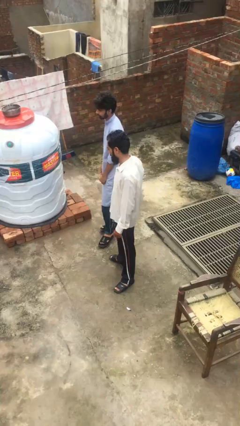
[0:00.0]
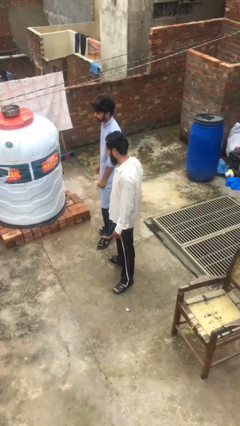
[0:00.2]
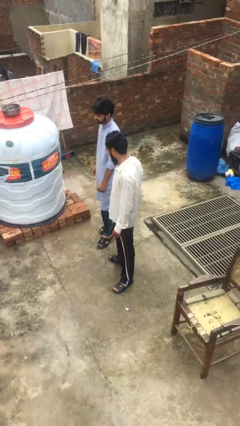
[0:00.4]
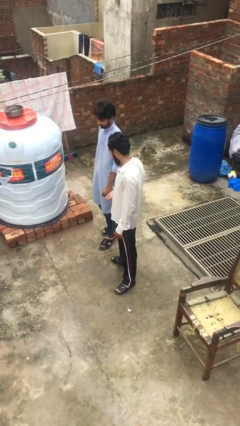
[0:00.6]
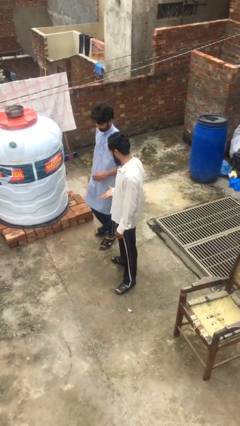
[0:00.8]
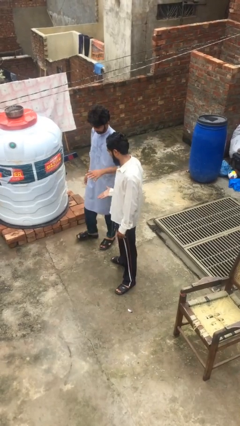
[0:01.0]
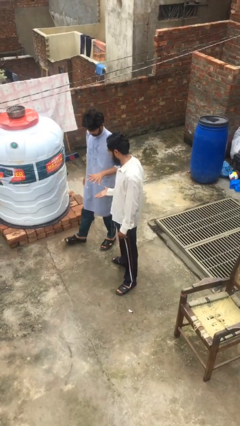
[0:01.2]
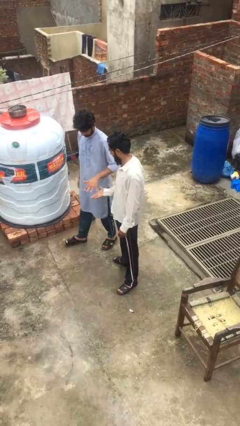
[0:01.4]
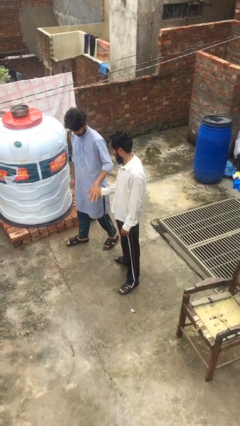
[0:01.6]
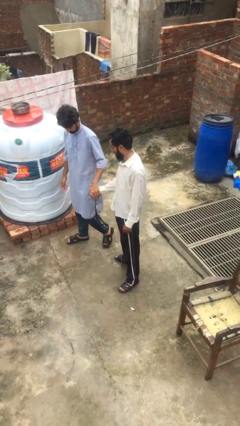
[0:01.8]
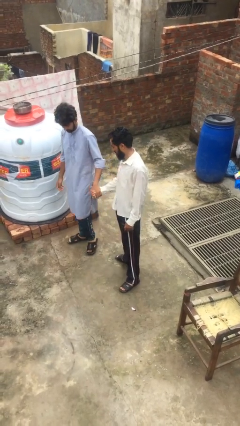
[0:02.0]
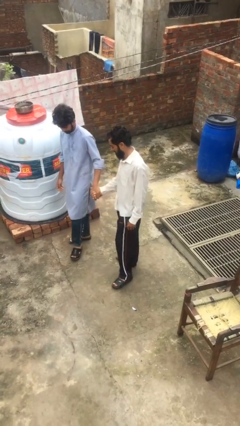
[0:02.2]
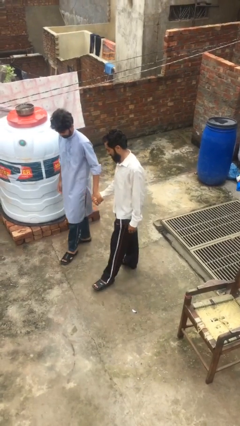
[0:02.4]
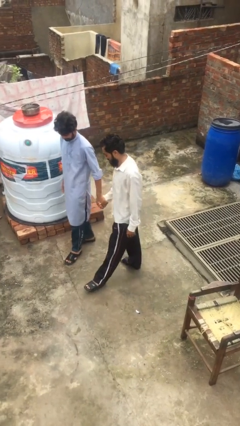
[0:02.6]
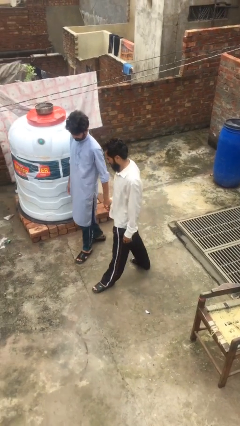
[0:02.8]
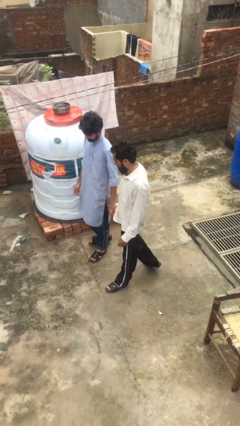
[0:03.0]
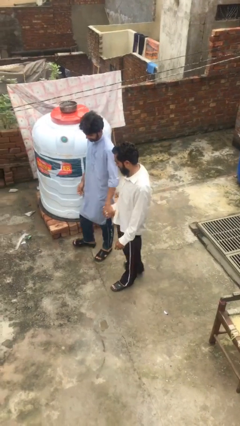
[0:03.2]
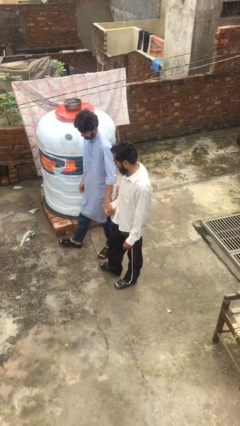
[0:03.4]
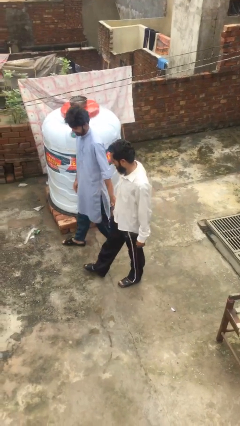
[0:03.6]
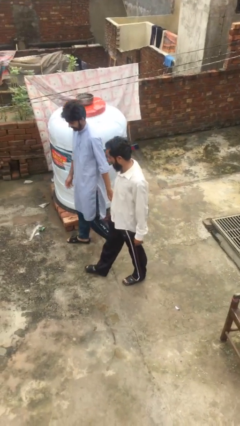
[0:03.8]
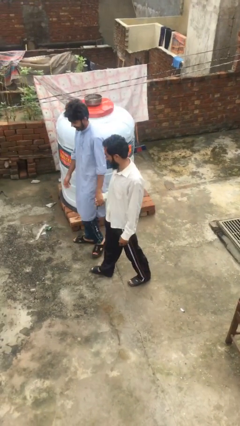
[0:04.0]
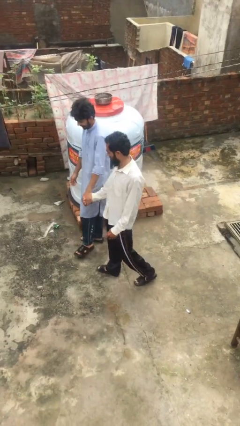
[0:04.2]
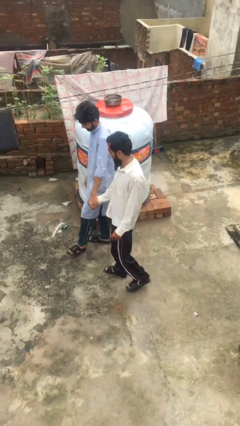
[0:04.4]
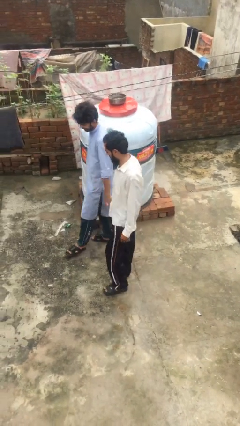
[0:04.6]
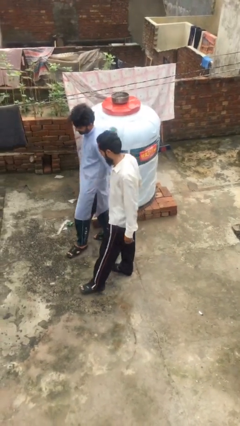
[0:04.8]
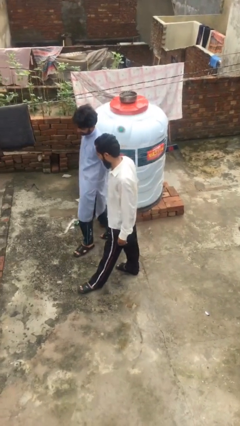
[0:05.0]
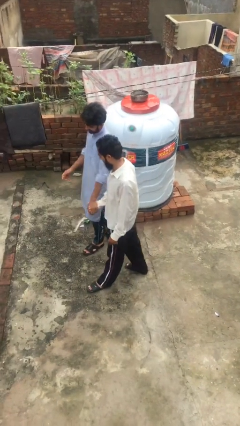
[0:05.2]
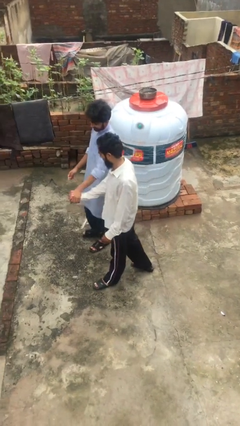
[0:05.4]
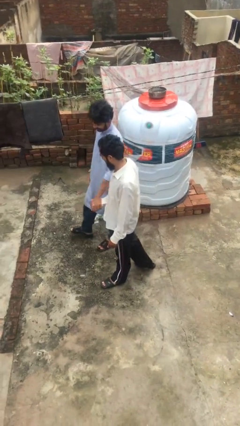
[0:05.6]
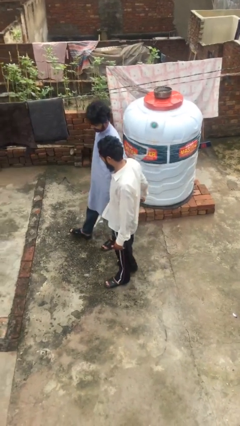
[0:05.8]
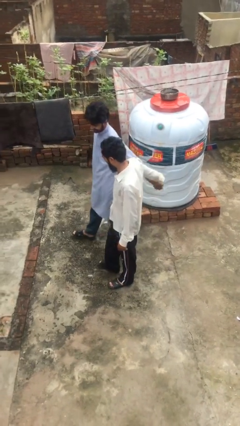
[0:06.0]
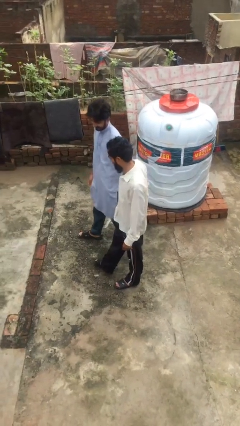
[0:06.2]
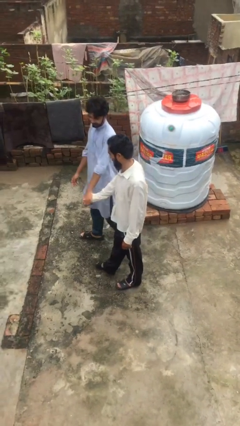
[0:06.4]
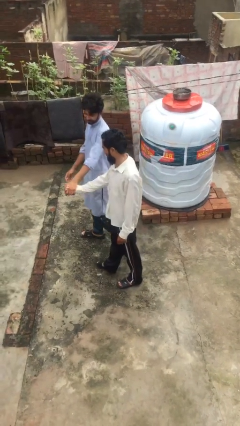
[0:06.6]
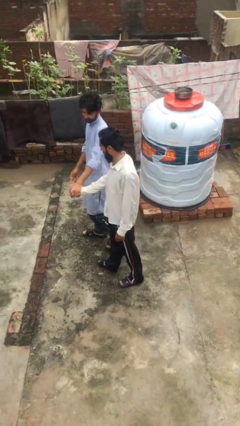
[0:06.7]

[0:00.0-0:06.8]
person holds hand

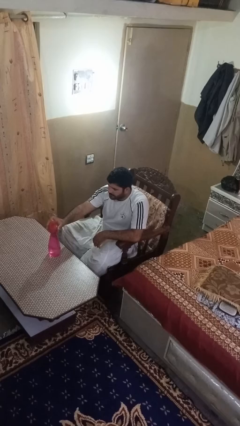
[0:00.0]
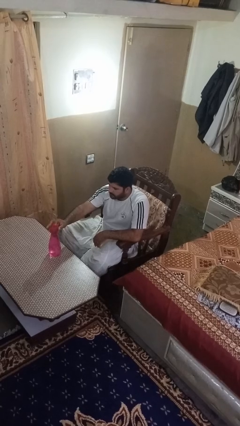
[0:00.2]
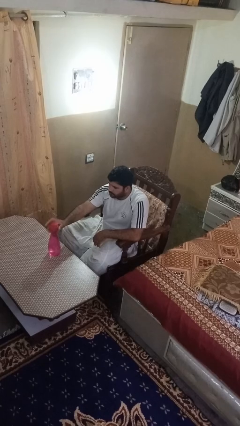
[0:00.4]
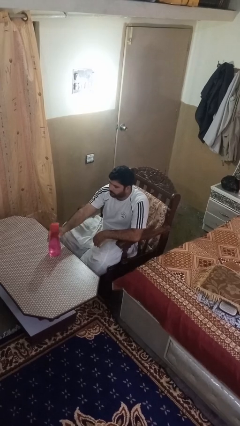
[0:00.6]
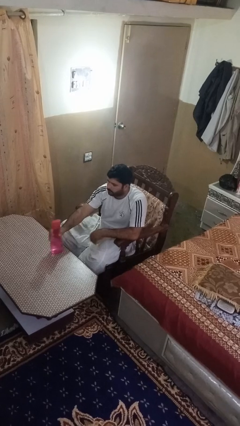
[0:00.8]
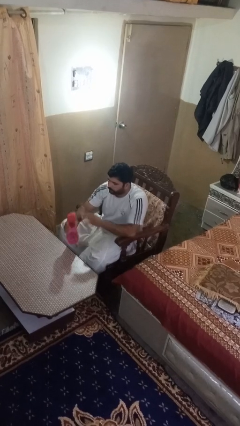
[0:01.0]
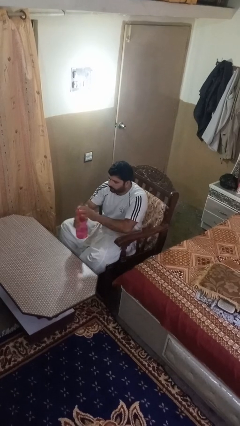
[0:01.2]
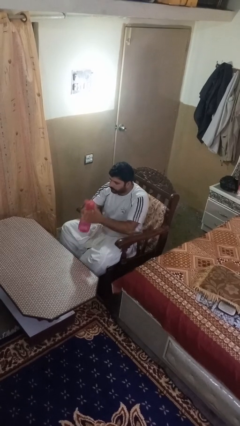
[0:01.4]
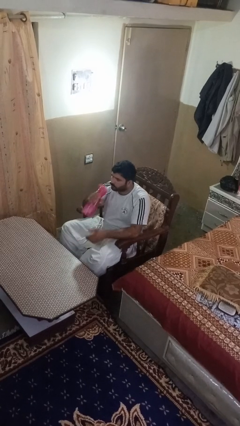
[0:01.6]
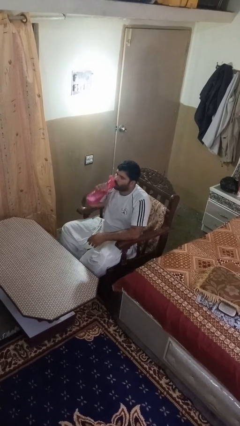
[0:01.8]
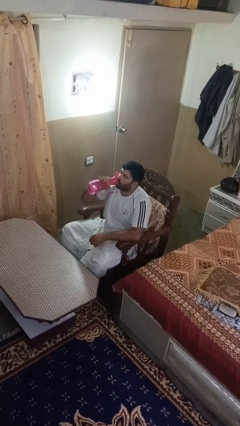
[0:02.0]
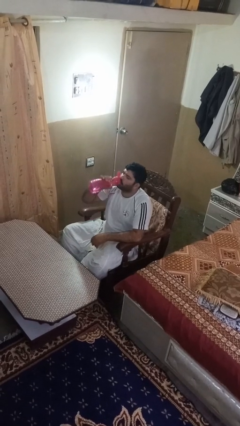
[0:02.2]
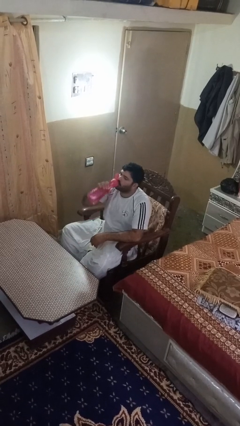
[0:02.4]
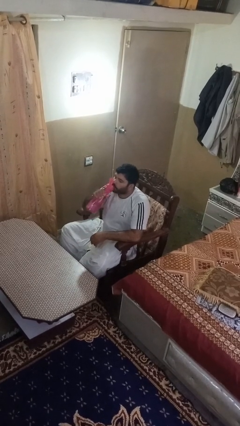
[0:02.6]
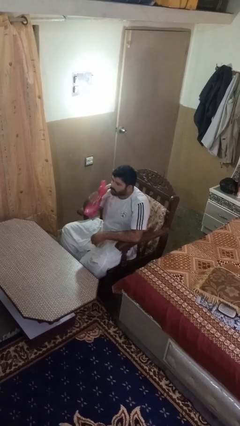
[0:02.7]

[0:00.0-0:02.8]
person drinks from bottle

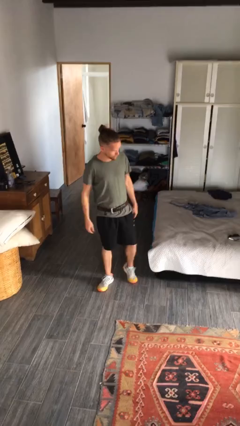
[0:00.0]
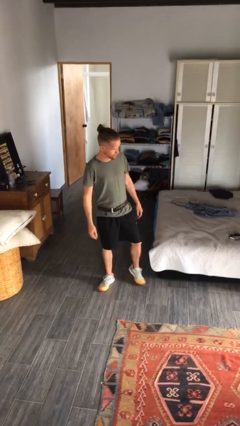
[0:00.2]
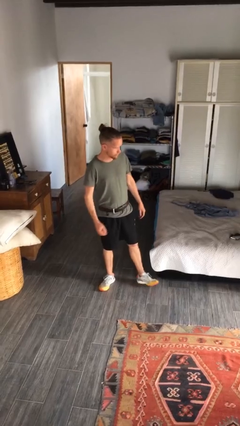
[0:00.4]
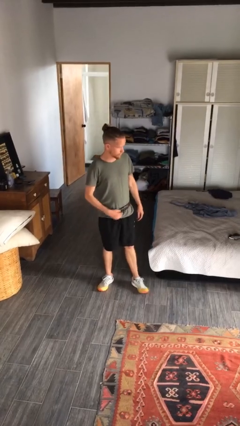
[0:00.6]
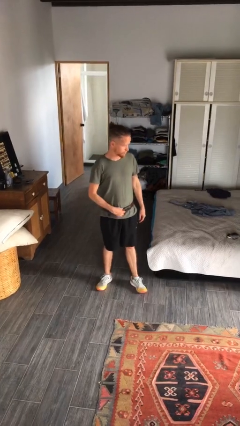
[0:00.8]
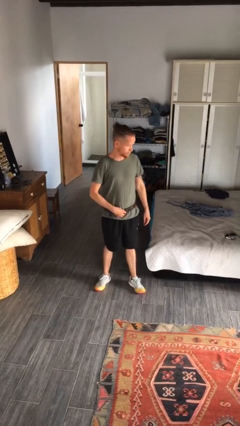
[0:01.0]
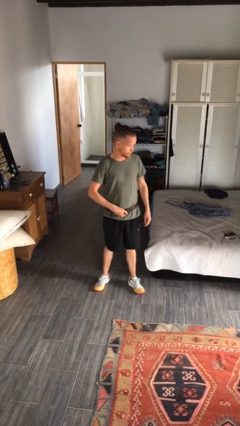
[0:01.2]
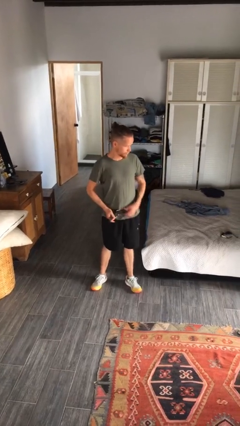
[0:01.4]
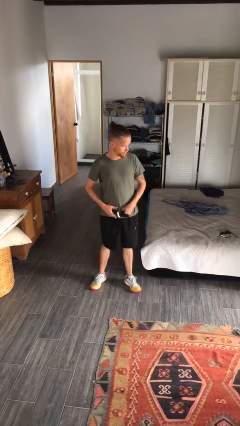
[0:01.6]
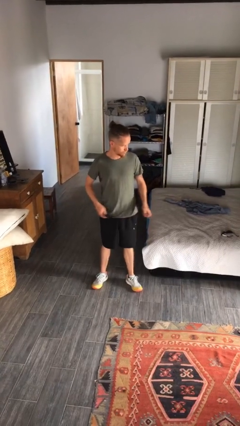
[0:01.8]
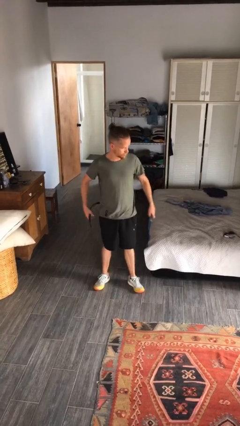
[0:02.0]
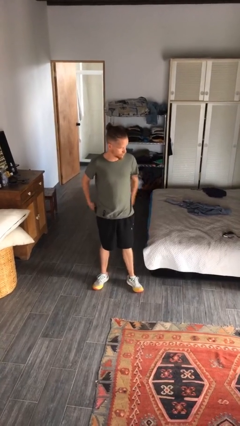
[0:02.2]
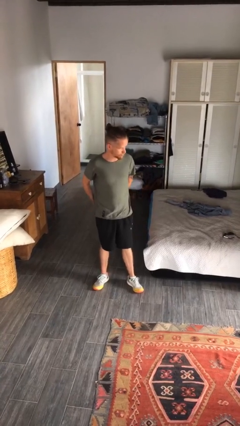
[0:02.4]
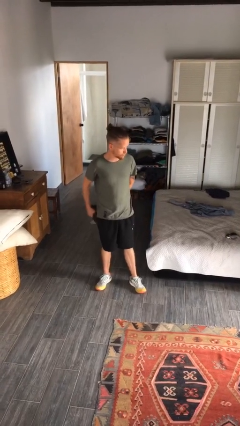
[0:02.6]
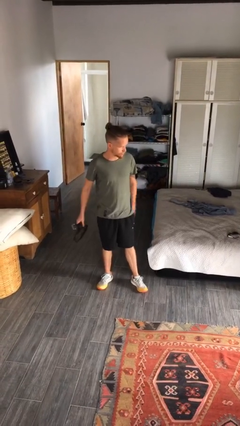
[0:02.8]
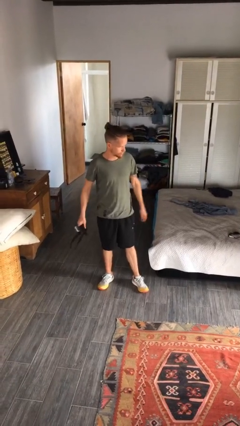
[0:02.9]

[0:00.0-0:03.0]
person takes off belt

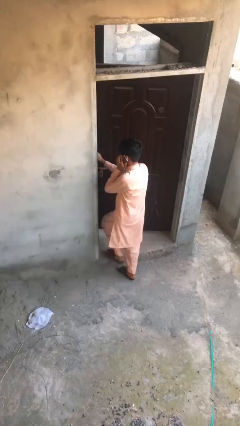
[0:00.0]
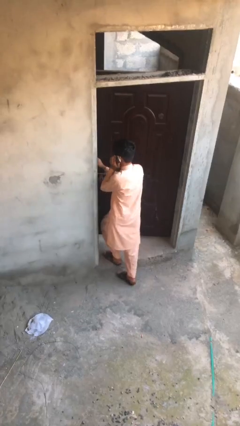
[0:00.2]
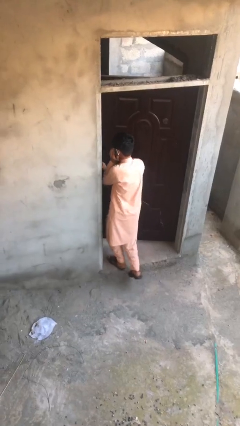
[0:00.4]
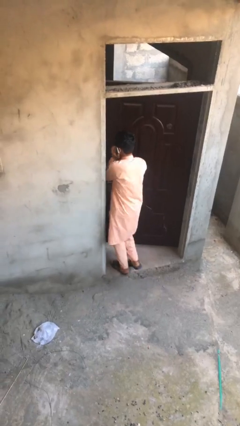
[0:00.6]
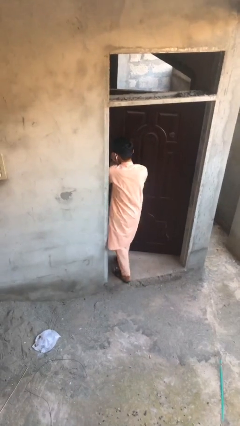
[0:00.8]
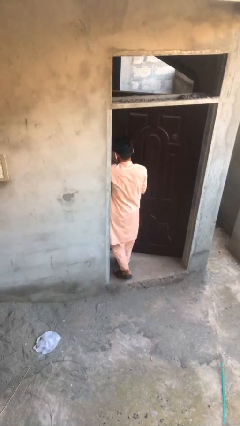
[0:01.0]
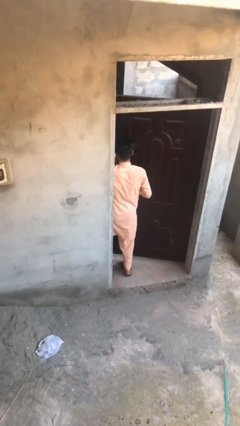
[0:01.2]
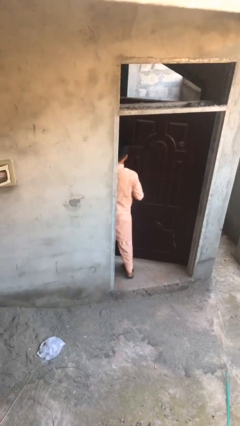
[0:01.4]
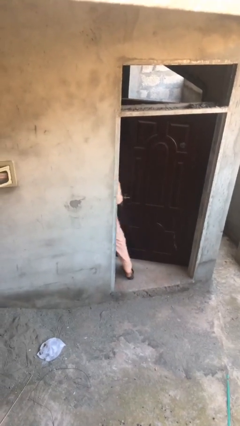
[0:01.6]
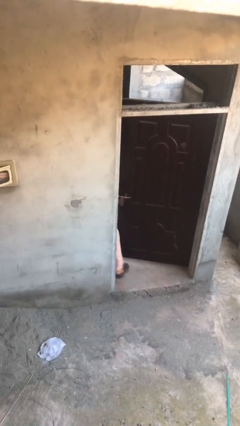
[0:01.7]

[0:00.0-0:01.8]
person exits scene through structure

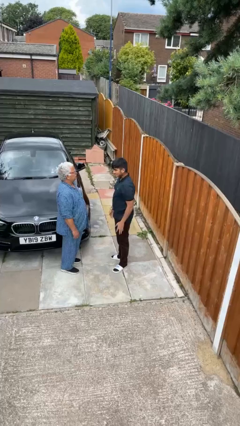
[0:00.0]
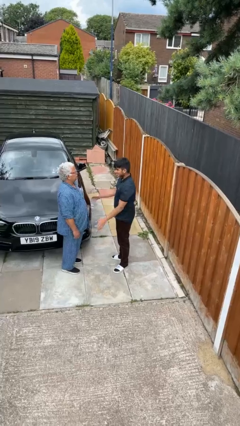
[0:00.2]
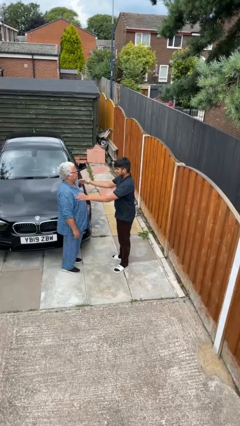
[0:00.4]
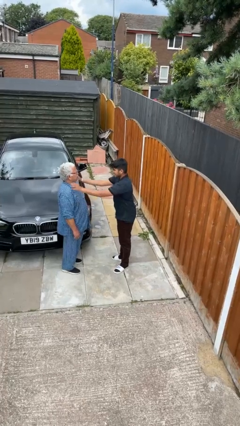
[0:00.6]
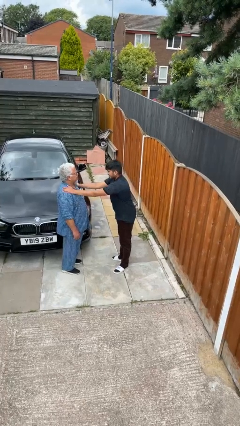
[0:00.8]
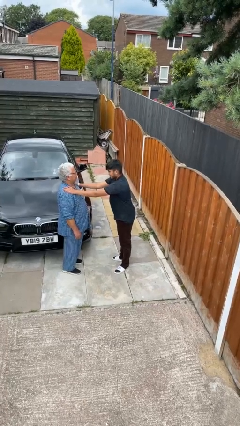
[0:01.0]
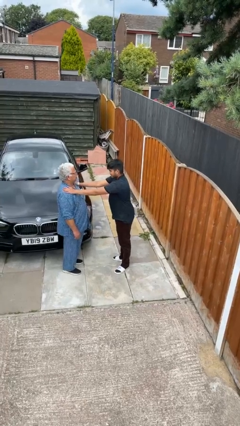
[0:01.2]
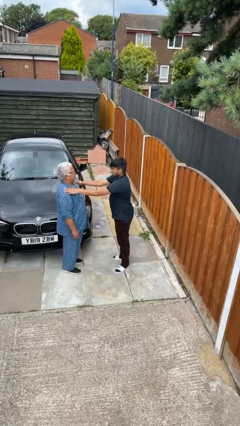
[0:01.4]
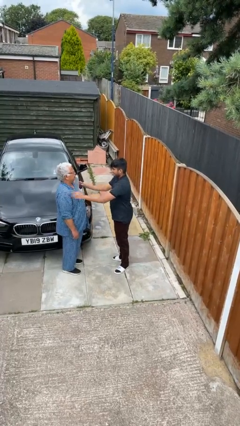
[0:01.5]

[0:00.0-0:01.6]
person pounds shoulders of person

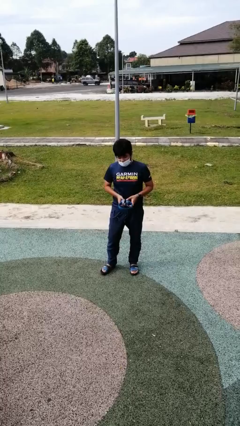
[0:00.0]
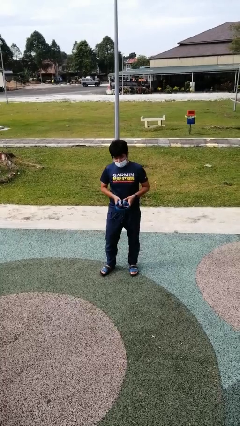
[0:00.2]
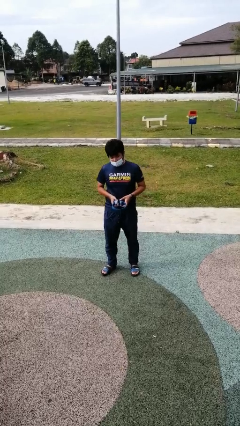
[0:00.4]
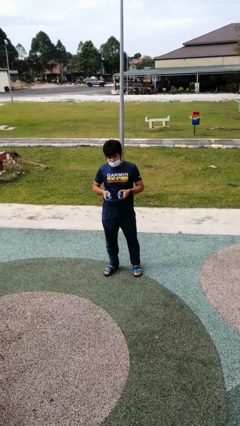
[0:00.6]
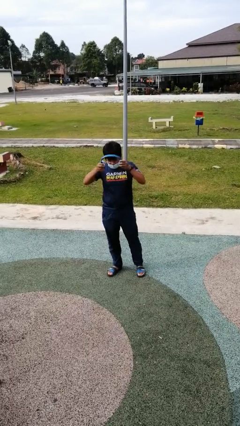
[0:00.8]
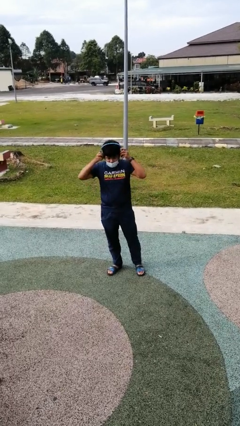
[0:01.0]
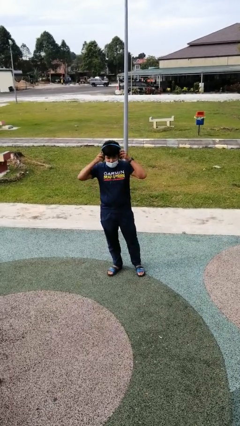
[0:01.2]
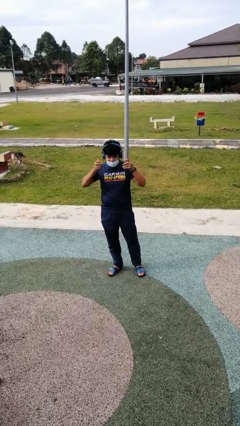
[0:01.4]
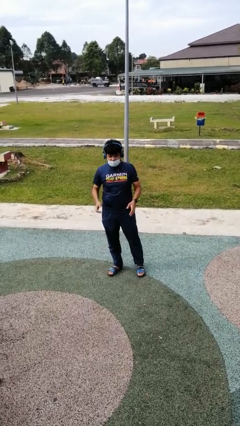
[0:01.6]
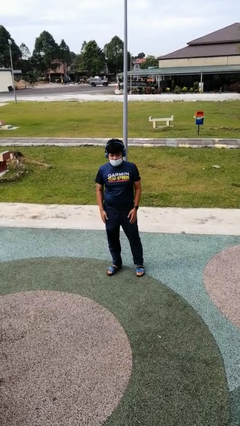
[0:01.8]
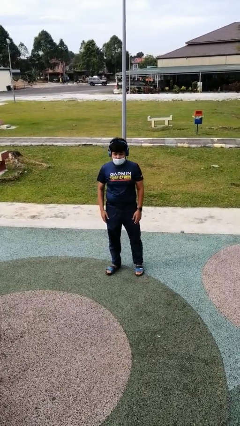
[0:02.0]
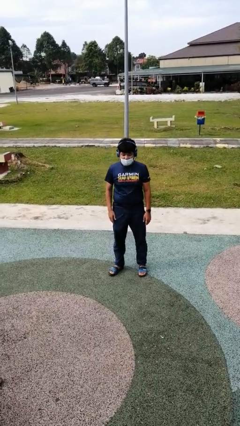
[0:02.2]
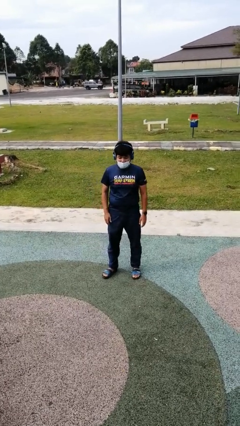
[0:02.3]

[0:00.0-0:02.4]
person puts on headphones
